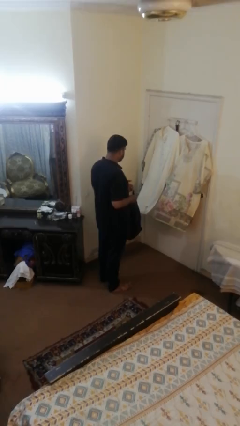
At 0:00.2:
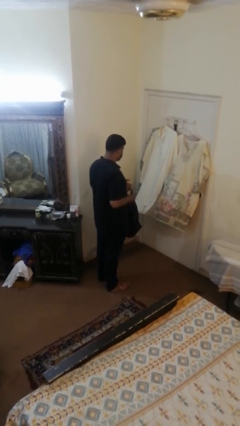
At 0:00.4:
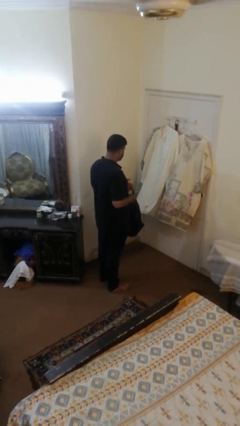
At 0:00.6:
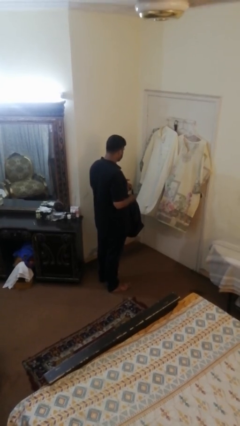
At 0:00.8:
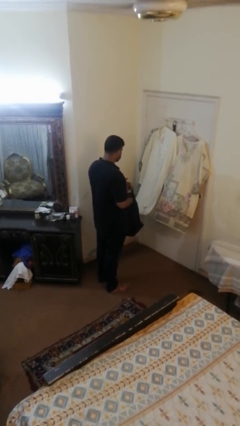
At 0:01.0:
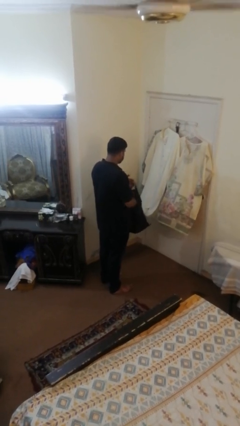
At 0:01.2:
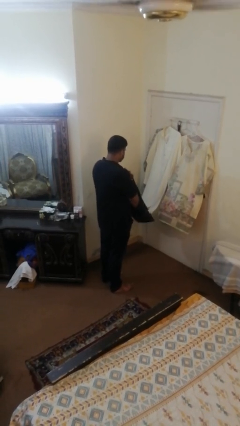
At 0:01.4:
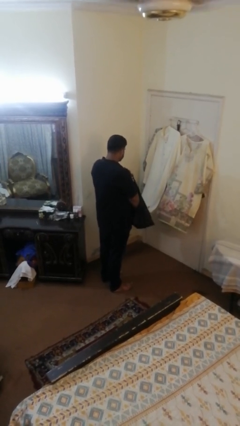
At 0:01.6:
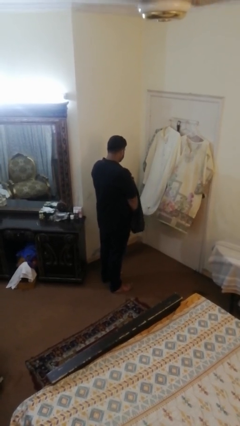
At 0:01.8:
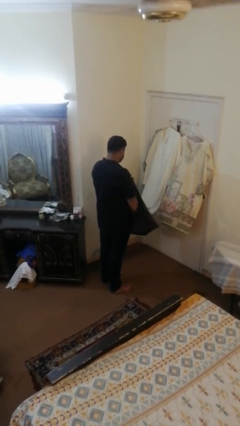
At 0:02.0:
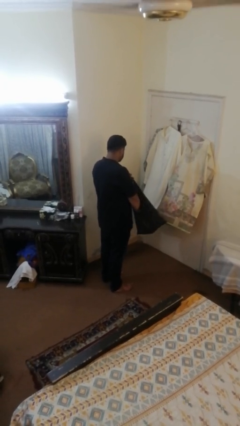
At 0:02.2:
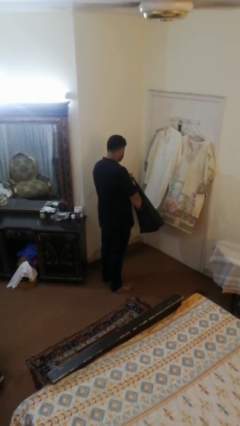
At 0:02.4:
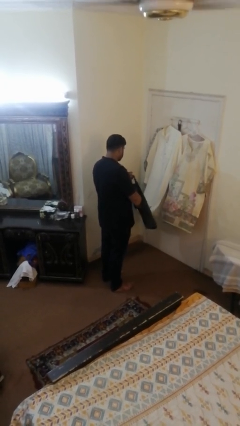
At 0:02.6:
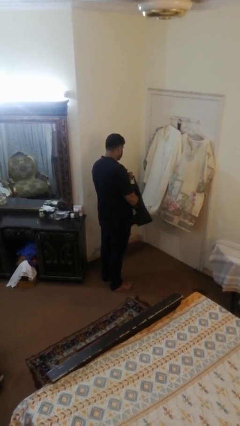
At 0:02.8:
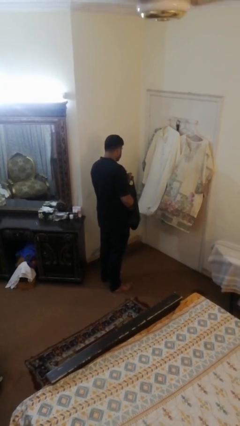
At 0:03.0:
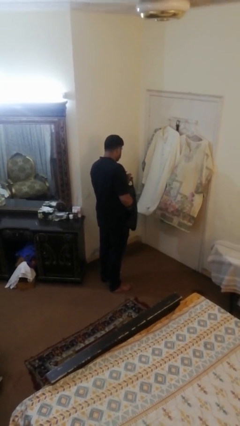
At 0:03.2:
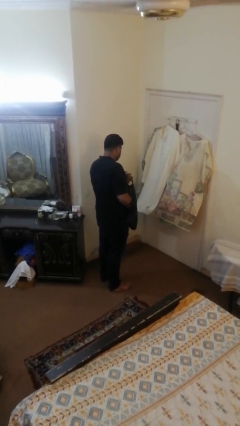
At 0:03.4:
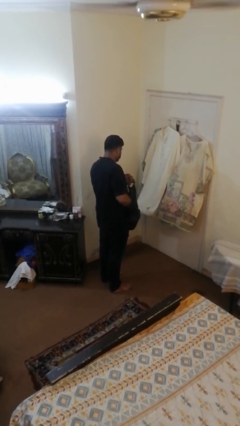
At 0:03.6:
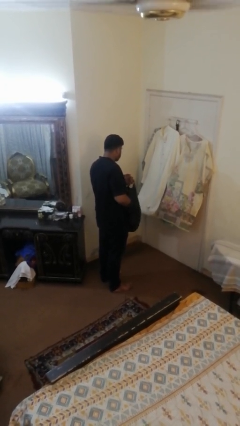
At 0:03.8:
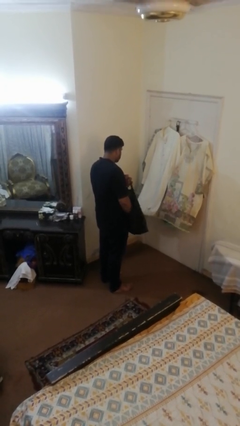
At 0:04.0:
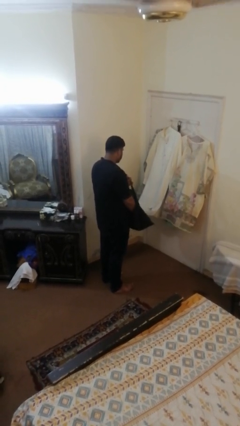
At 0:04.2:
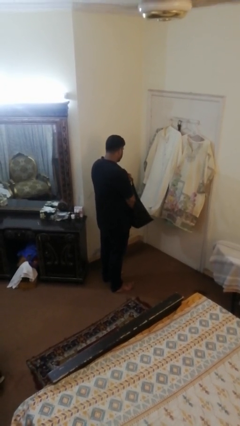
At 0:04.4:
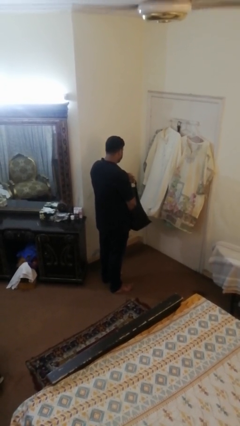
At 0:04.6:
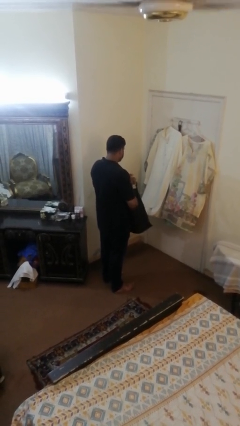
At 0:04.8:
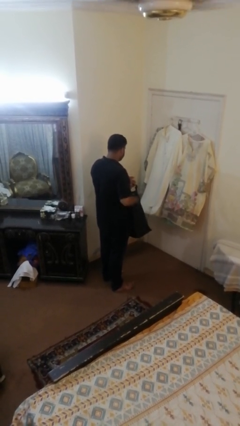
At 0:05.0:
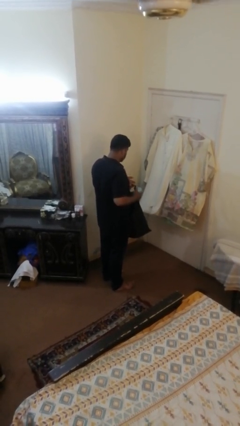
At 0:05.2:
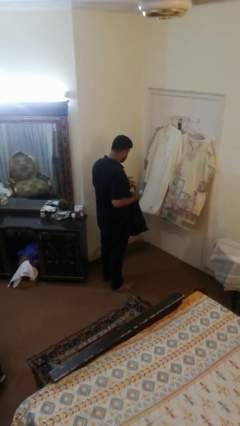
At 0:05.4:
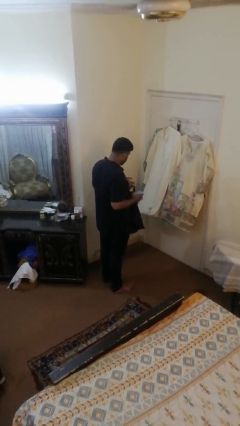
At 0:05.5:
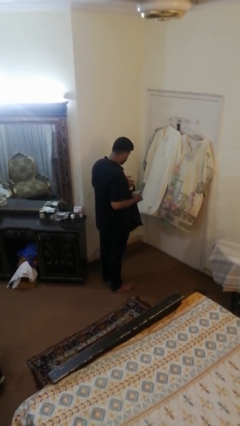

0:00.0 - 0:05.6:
person takes object from bag

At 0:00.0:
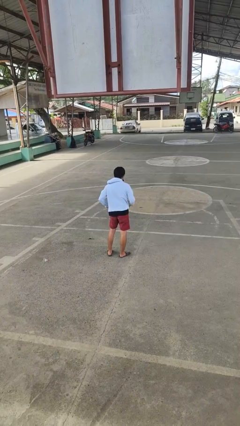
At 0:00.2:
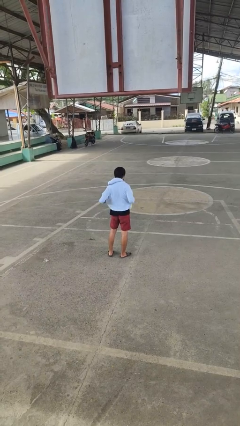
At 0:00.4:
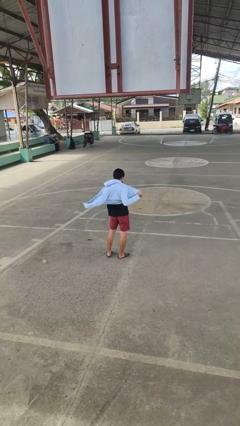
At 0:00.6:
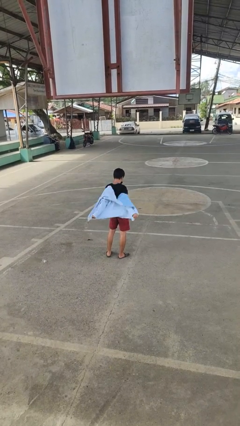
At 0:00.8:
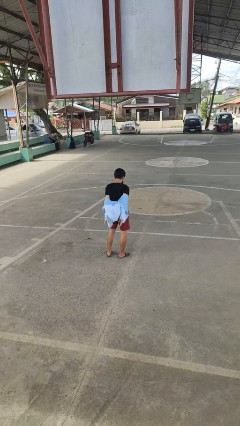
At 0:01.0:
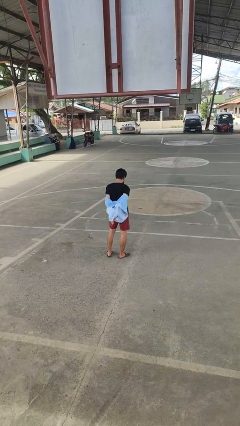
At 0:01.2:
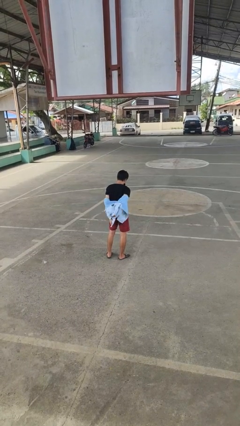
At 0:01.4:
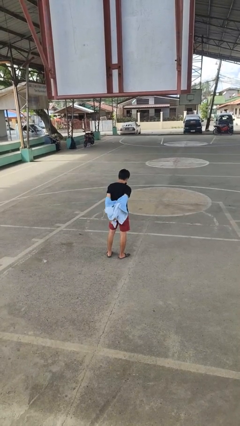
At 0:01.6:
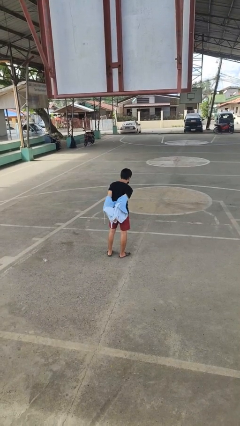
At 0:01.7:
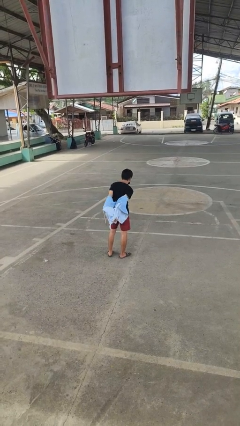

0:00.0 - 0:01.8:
person takes off jacket

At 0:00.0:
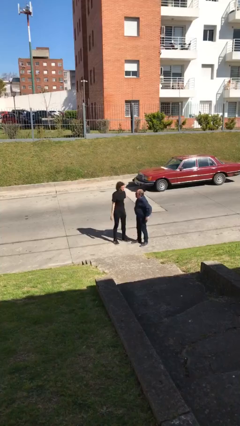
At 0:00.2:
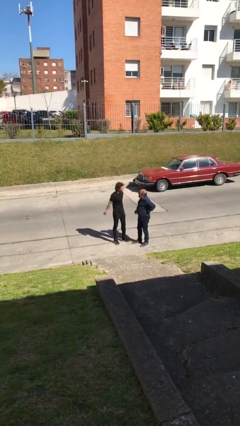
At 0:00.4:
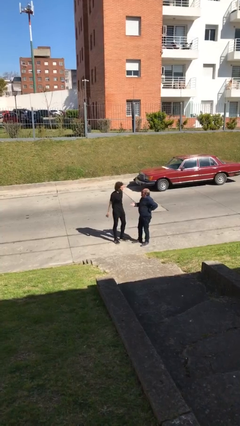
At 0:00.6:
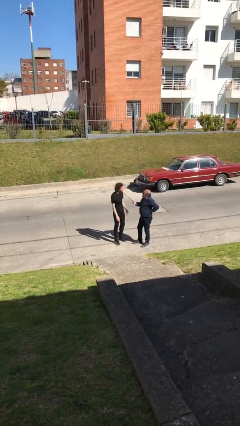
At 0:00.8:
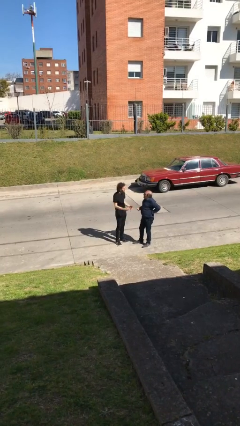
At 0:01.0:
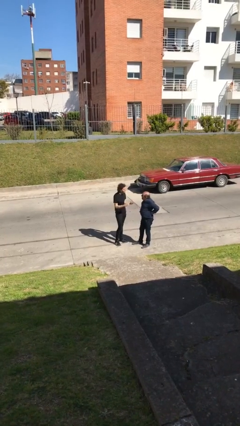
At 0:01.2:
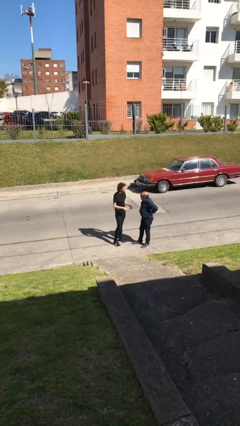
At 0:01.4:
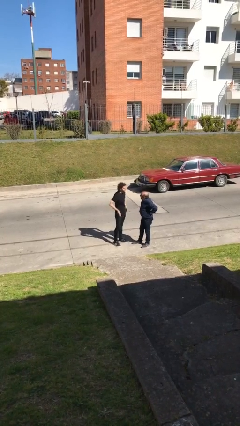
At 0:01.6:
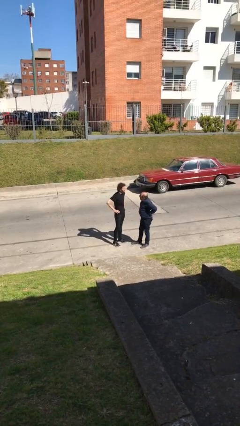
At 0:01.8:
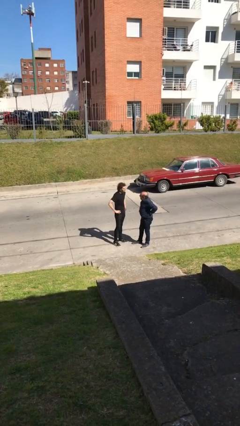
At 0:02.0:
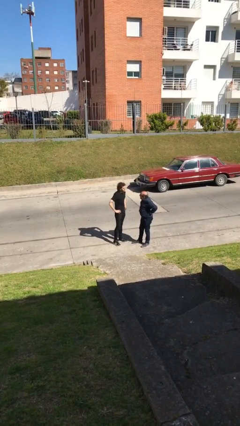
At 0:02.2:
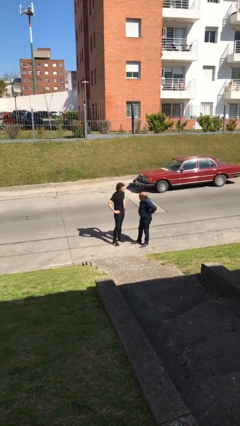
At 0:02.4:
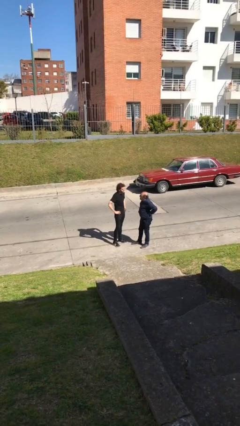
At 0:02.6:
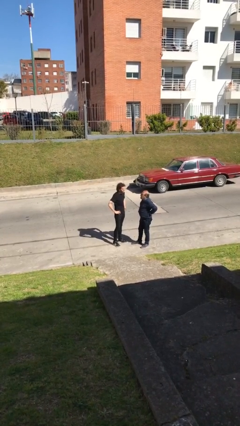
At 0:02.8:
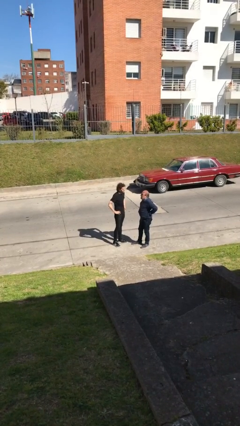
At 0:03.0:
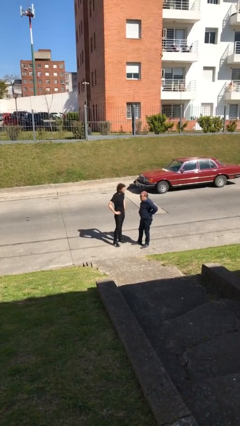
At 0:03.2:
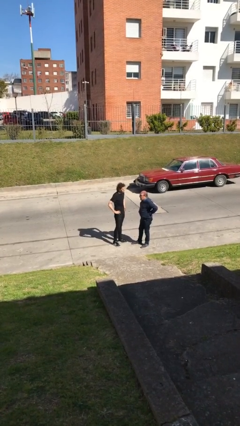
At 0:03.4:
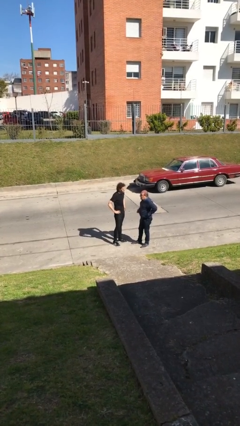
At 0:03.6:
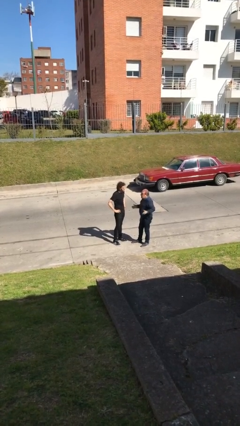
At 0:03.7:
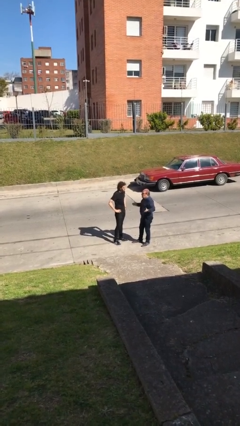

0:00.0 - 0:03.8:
person talks to person

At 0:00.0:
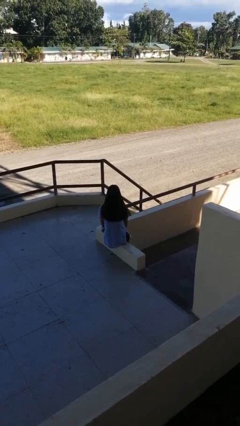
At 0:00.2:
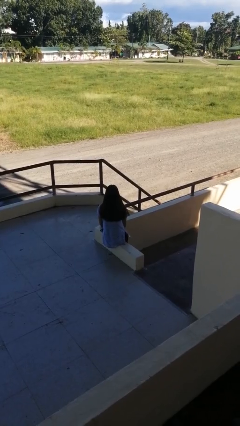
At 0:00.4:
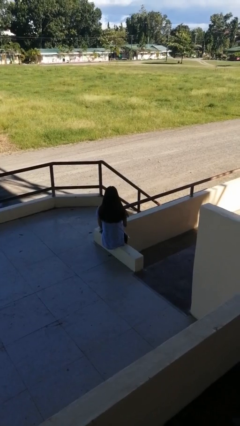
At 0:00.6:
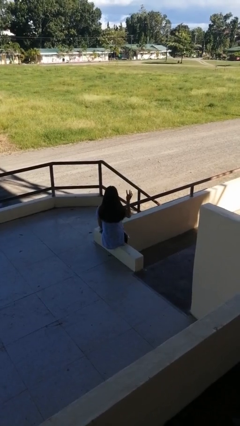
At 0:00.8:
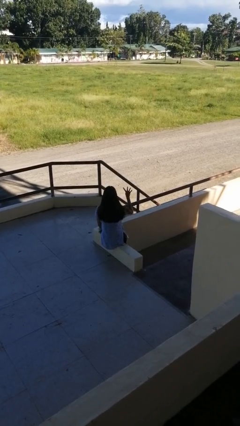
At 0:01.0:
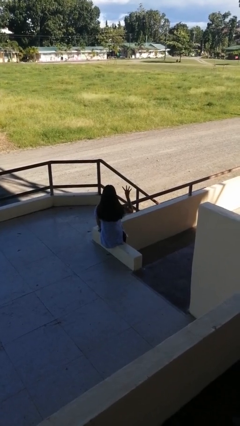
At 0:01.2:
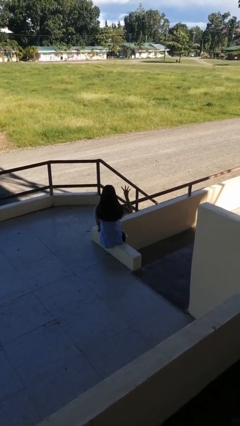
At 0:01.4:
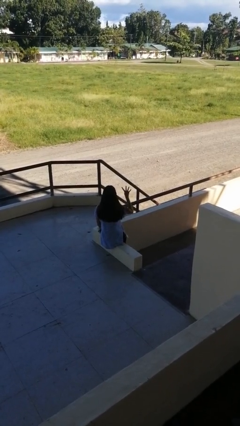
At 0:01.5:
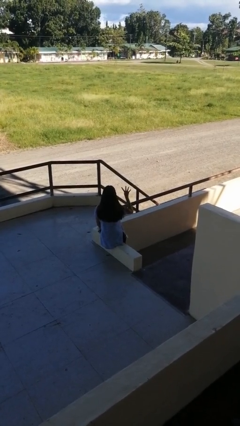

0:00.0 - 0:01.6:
person gestures number four

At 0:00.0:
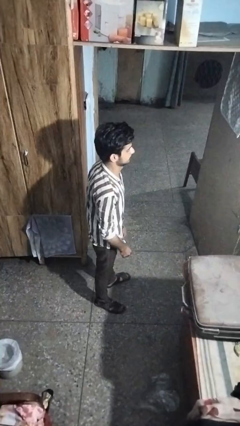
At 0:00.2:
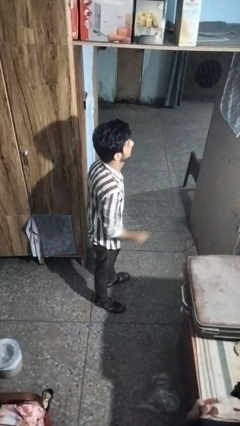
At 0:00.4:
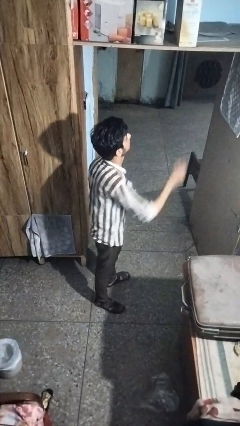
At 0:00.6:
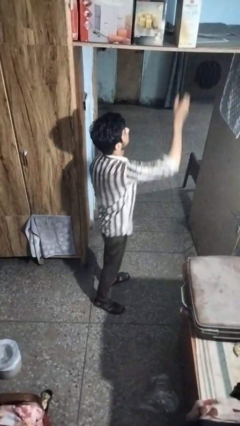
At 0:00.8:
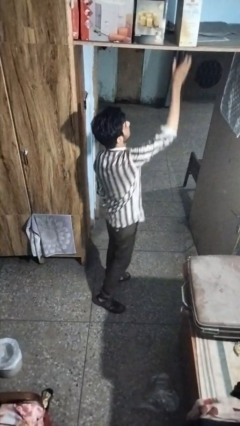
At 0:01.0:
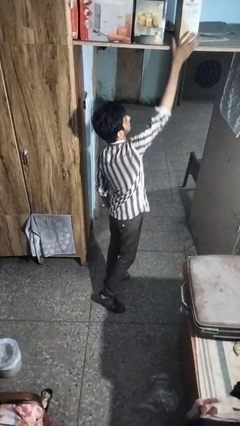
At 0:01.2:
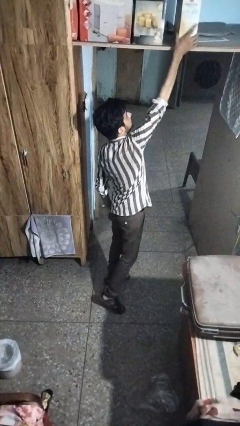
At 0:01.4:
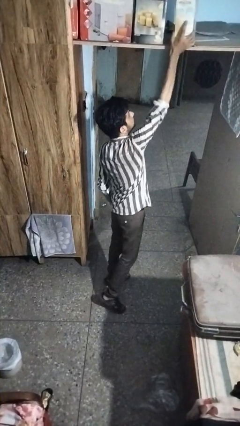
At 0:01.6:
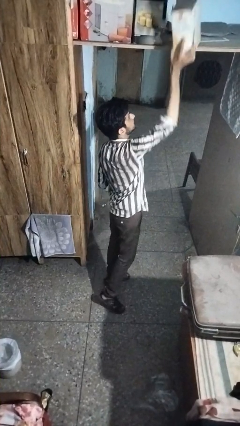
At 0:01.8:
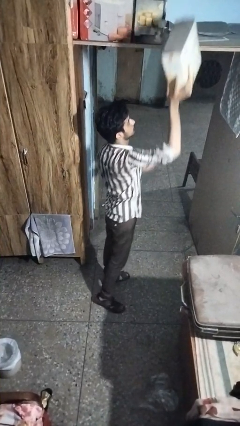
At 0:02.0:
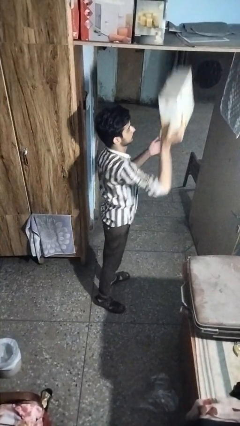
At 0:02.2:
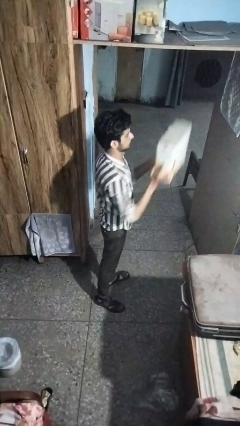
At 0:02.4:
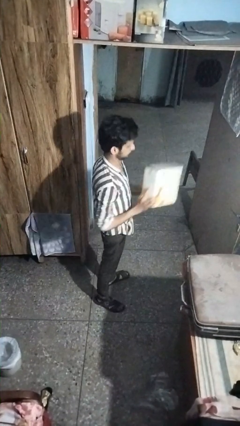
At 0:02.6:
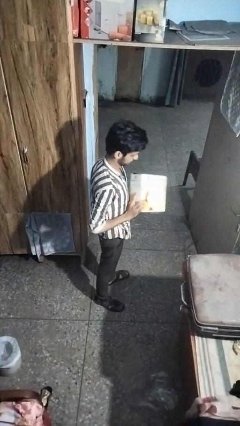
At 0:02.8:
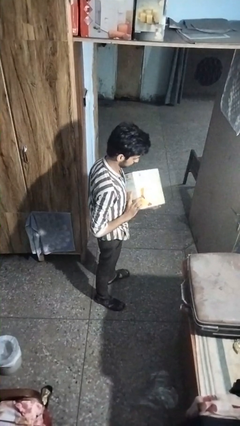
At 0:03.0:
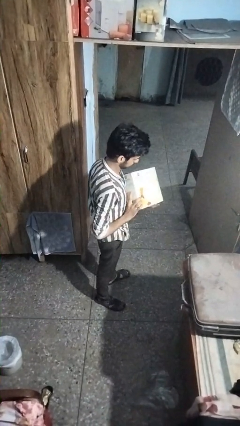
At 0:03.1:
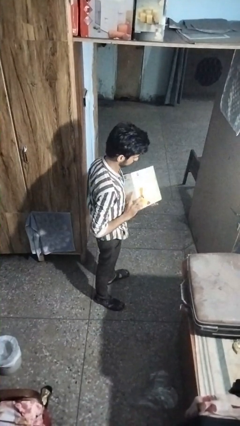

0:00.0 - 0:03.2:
person picks up object from shelf

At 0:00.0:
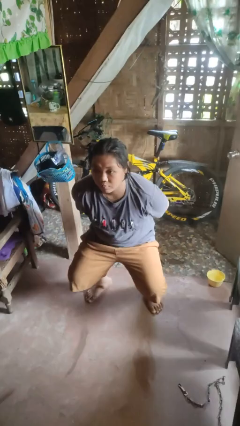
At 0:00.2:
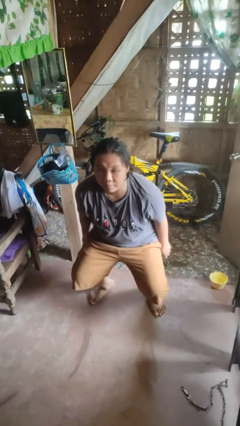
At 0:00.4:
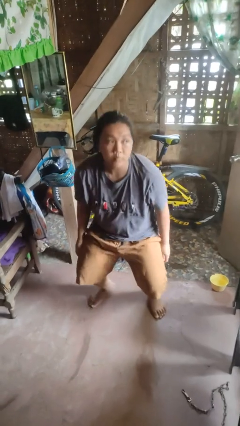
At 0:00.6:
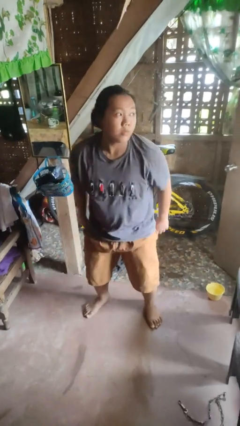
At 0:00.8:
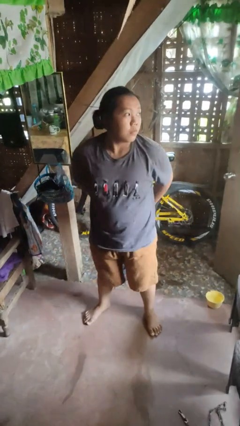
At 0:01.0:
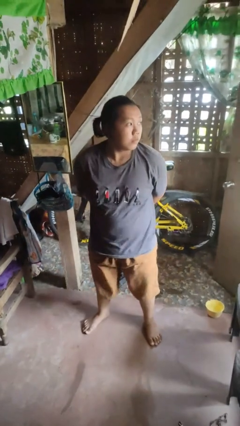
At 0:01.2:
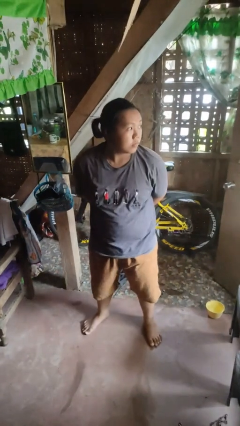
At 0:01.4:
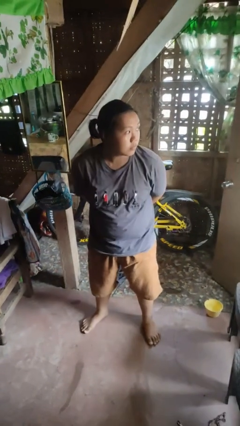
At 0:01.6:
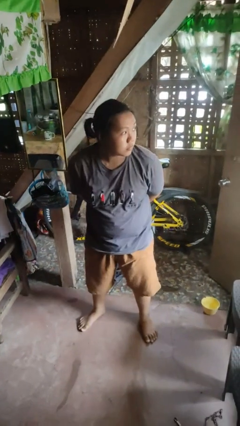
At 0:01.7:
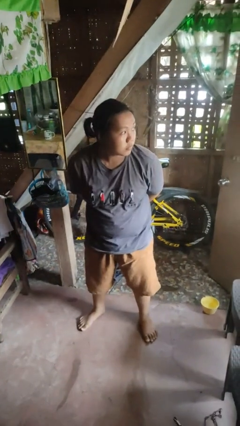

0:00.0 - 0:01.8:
person stands up
